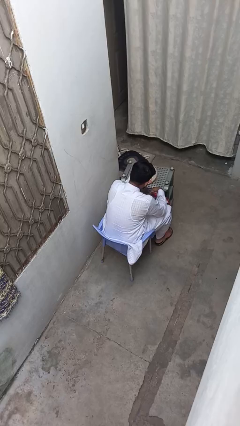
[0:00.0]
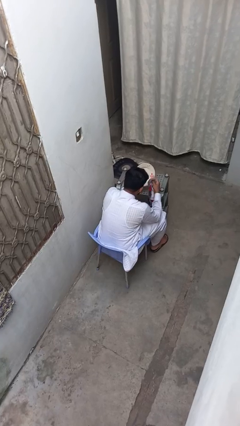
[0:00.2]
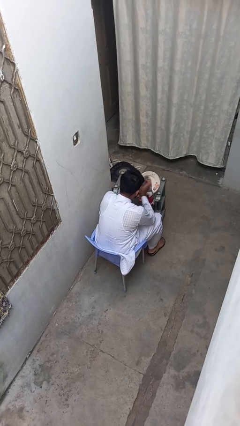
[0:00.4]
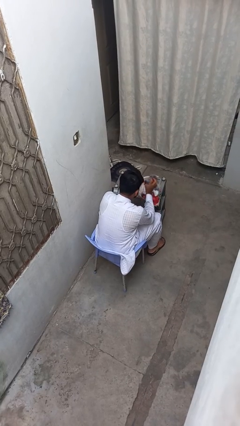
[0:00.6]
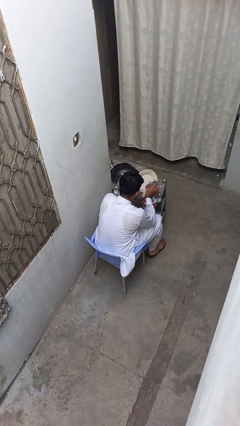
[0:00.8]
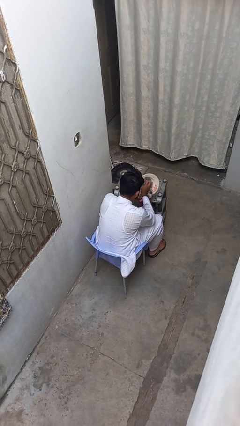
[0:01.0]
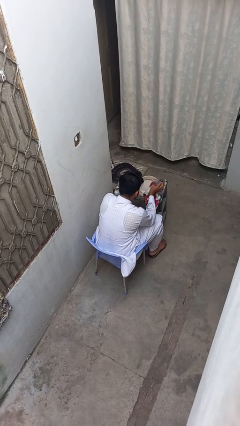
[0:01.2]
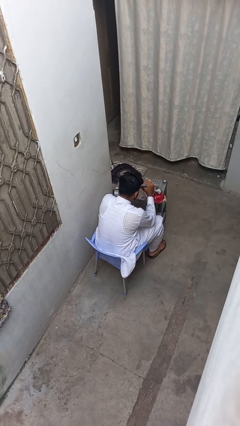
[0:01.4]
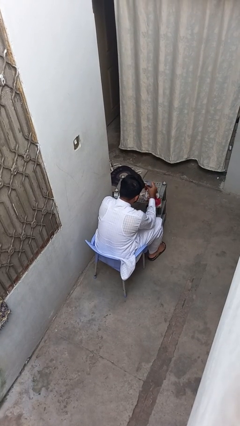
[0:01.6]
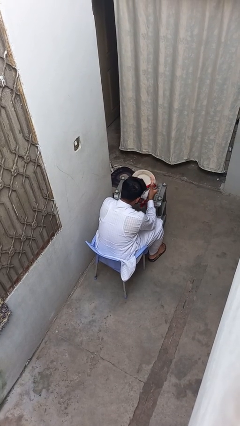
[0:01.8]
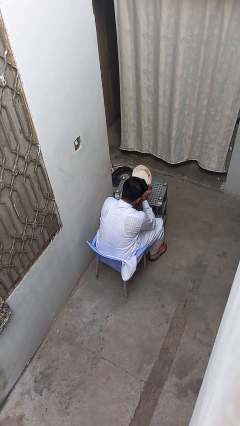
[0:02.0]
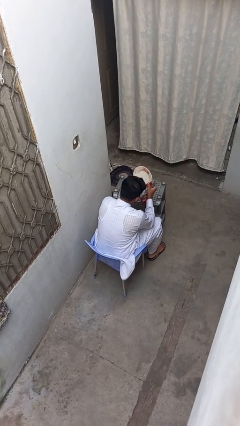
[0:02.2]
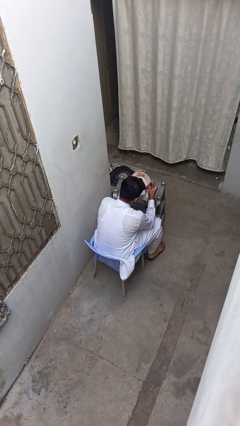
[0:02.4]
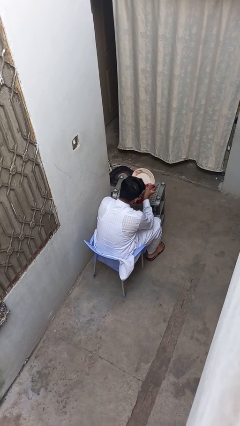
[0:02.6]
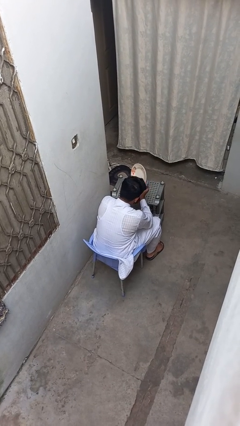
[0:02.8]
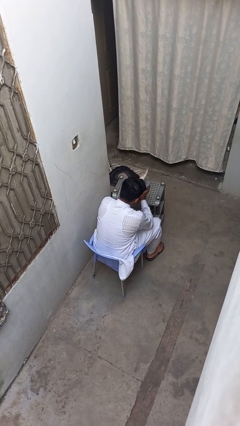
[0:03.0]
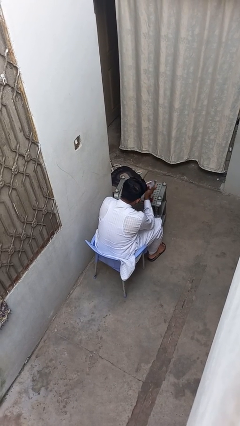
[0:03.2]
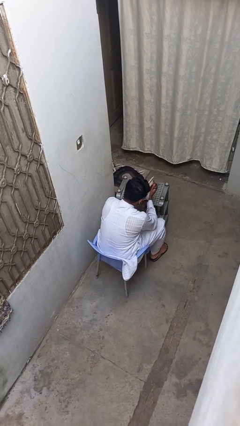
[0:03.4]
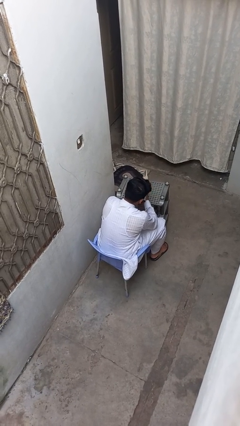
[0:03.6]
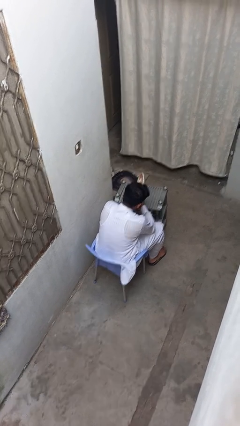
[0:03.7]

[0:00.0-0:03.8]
person dries dish

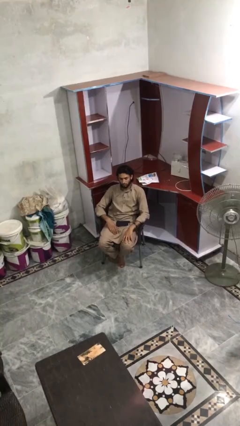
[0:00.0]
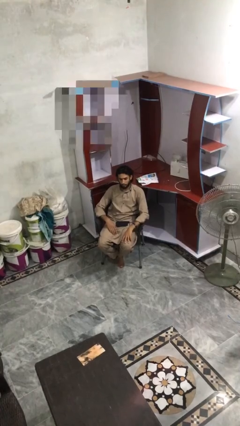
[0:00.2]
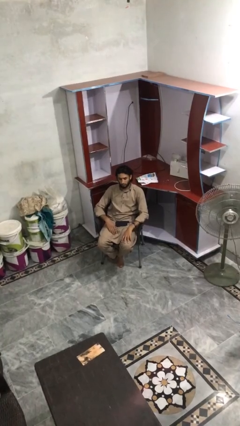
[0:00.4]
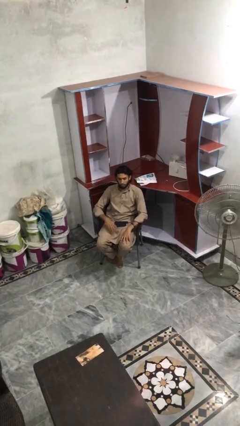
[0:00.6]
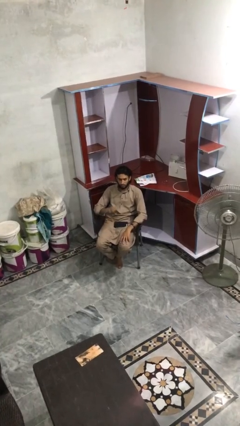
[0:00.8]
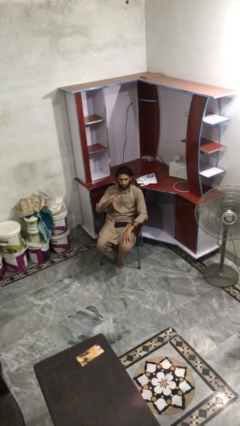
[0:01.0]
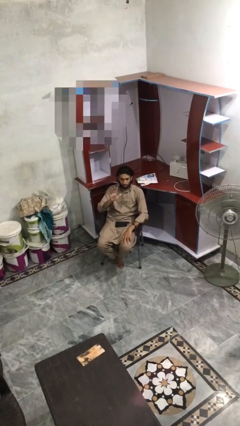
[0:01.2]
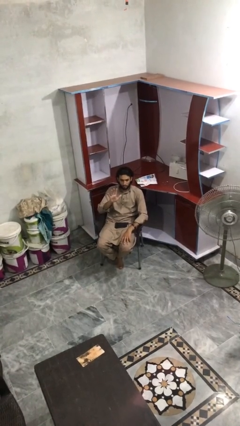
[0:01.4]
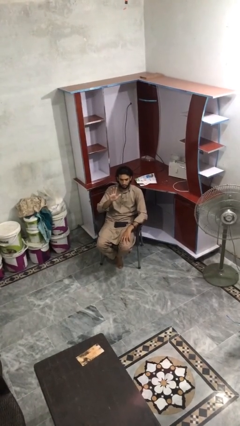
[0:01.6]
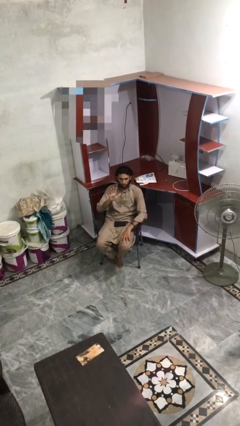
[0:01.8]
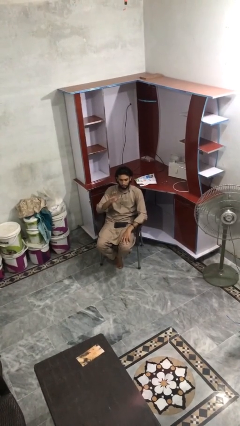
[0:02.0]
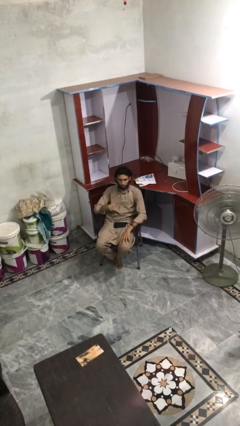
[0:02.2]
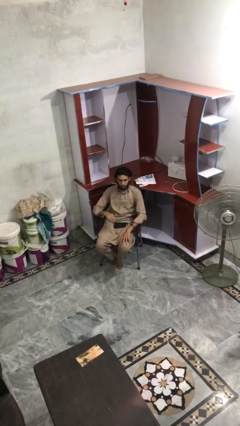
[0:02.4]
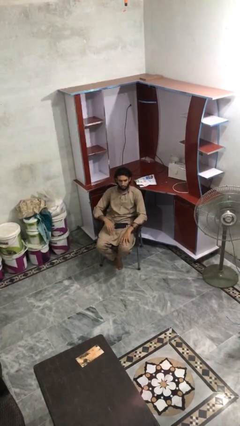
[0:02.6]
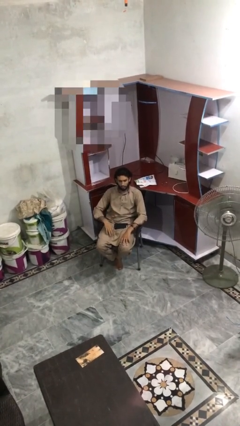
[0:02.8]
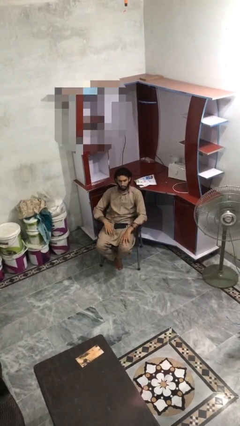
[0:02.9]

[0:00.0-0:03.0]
person gestures number five

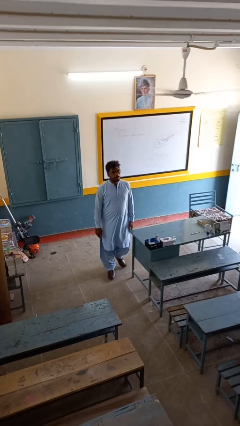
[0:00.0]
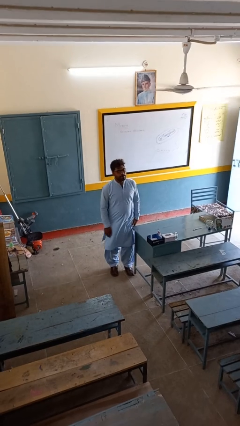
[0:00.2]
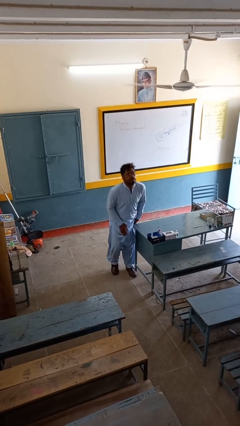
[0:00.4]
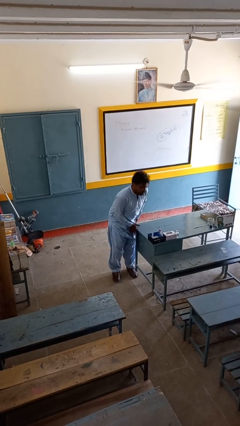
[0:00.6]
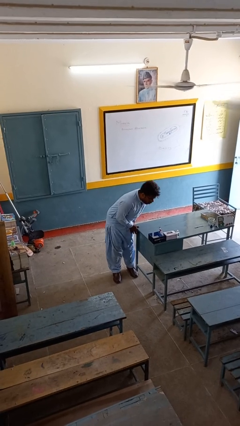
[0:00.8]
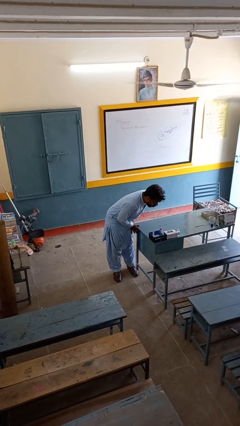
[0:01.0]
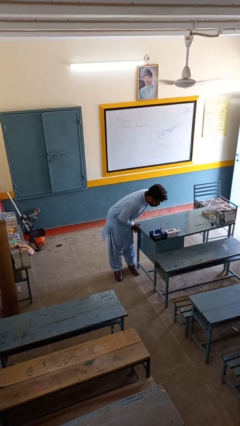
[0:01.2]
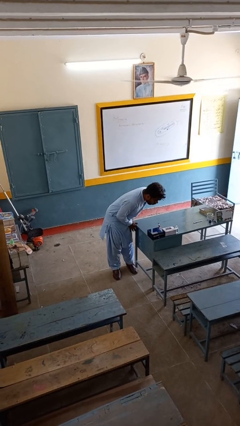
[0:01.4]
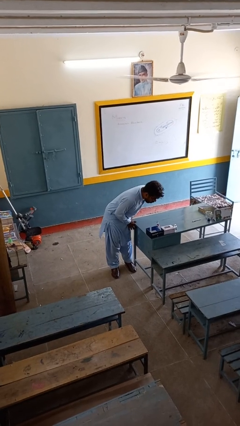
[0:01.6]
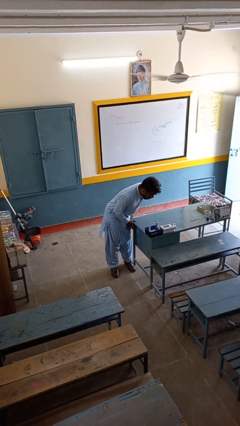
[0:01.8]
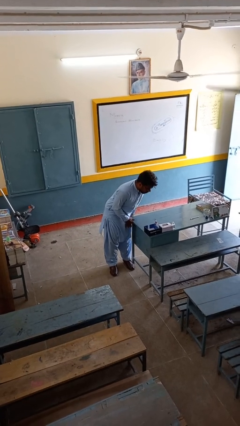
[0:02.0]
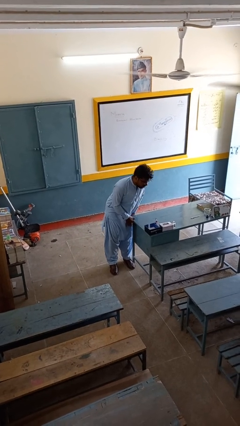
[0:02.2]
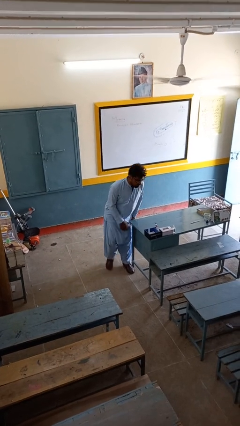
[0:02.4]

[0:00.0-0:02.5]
person bumps into table

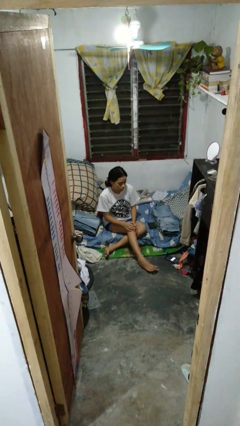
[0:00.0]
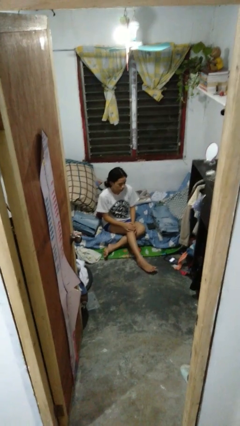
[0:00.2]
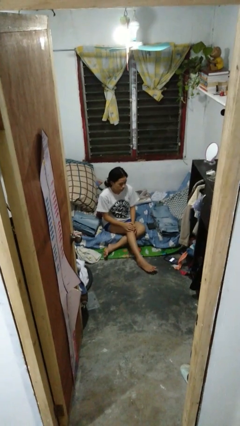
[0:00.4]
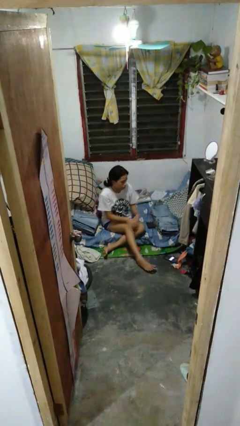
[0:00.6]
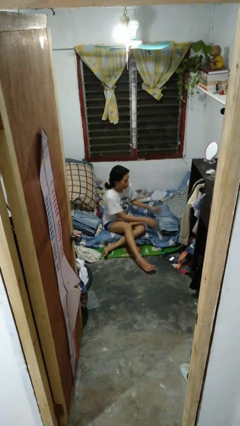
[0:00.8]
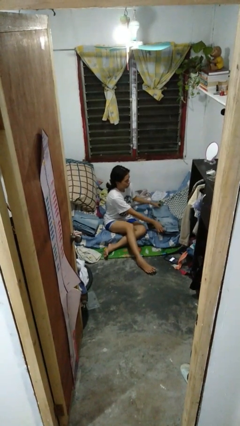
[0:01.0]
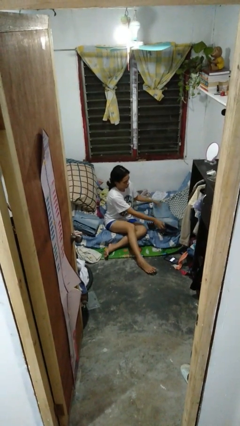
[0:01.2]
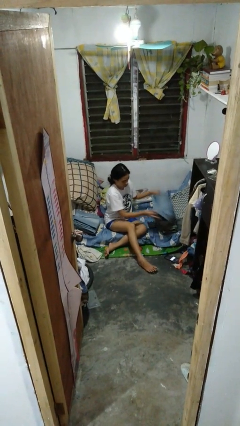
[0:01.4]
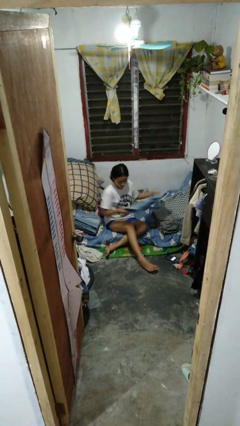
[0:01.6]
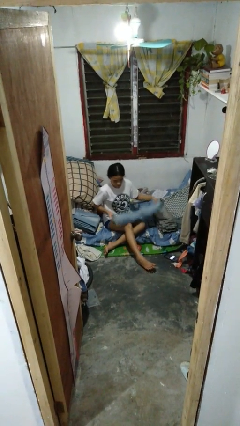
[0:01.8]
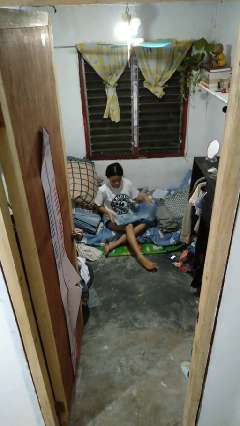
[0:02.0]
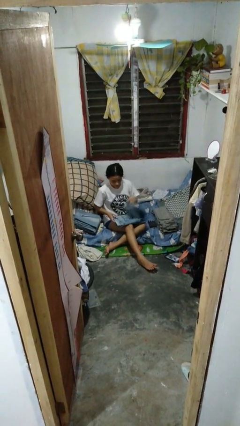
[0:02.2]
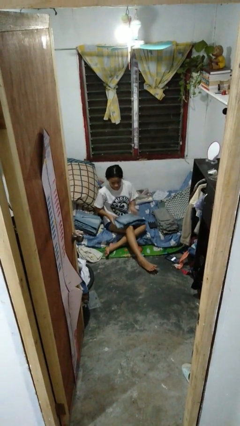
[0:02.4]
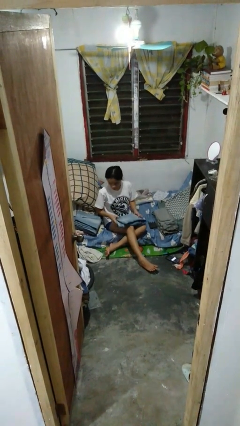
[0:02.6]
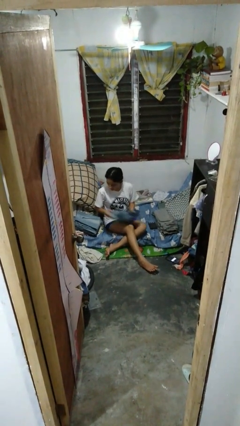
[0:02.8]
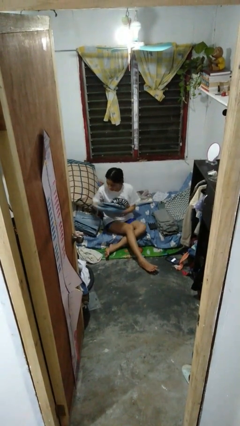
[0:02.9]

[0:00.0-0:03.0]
person folds pants

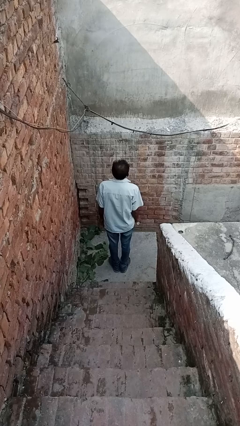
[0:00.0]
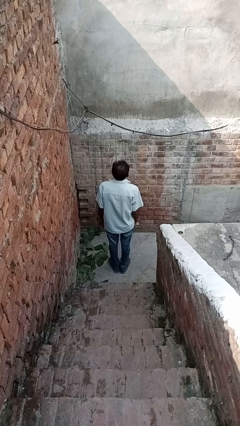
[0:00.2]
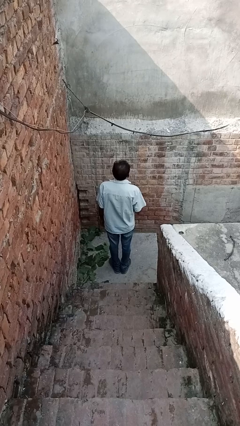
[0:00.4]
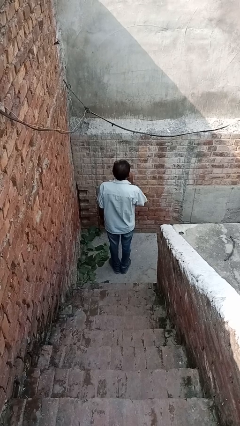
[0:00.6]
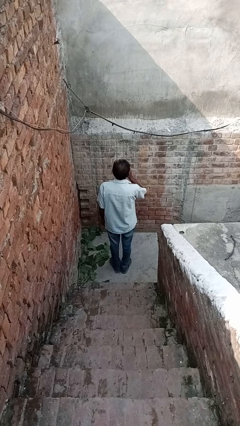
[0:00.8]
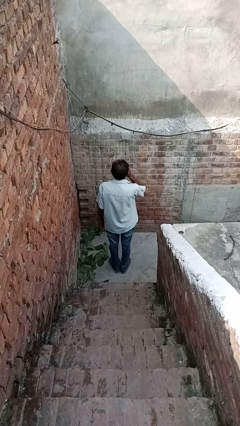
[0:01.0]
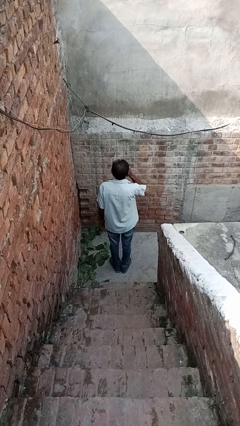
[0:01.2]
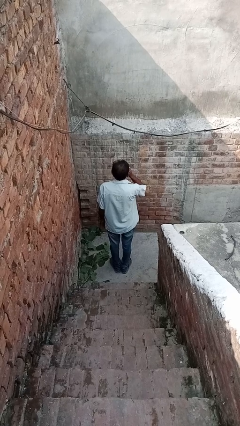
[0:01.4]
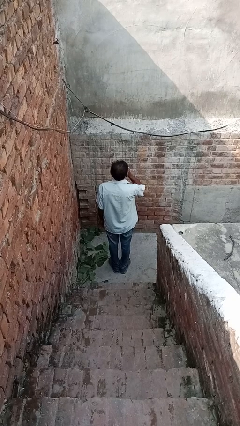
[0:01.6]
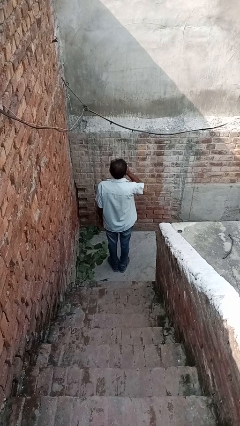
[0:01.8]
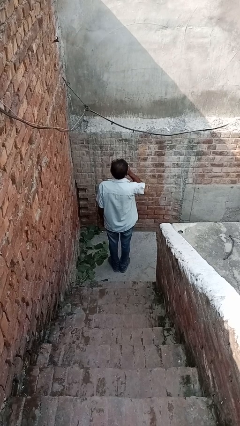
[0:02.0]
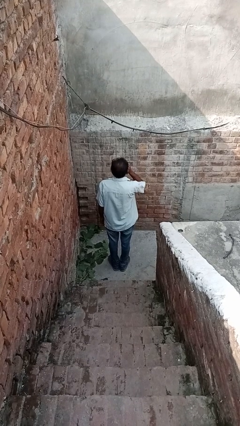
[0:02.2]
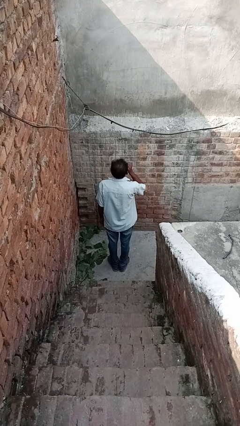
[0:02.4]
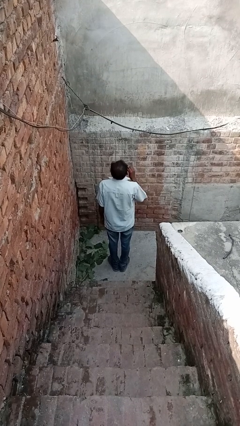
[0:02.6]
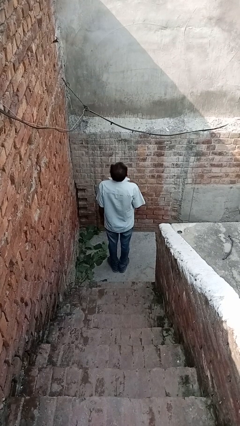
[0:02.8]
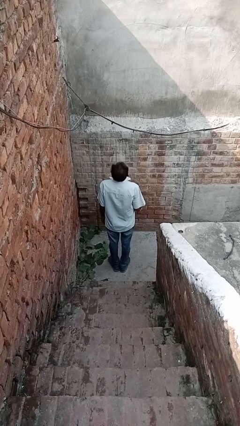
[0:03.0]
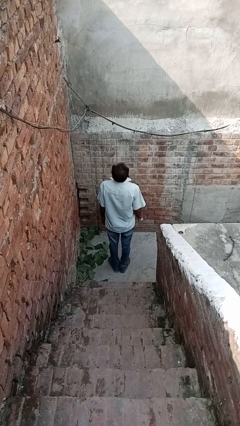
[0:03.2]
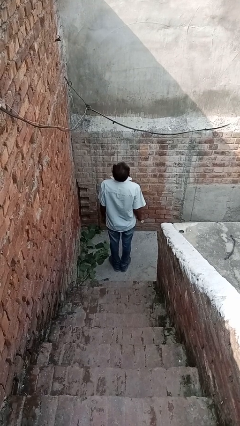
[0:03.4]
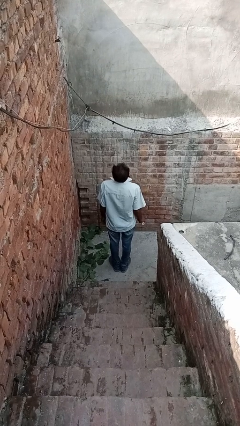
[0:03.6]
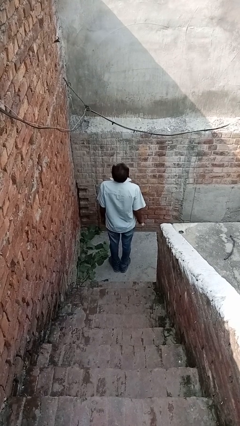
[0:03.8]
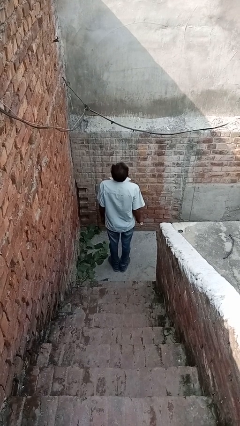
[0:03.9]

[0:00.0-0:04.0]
person vapes

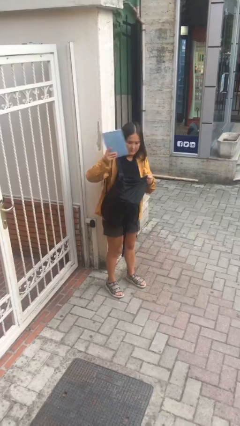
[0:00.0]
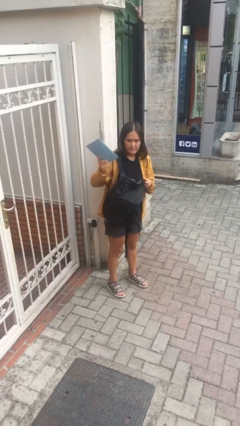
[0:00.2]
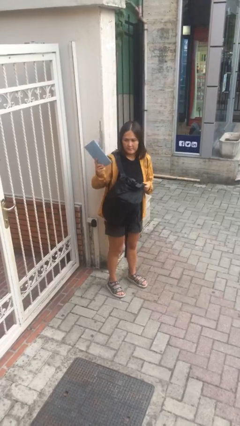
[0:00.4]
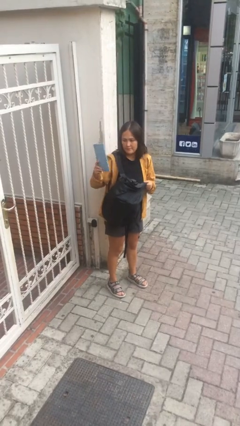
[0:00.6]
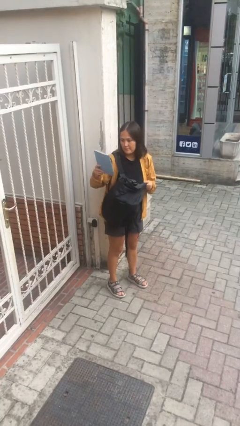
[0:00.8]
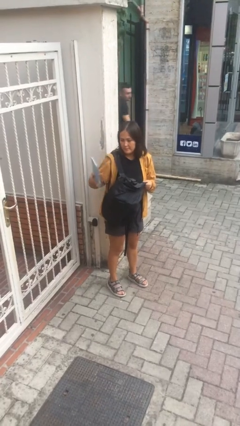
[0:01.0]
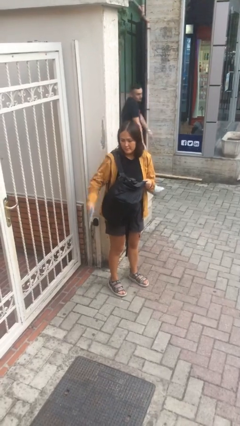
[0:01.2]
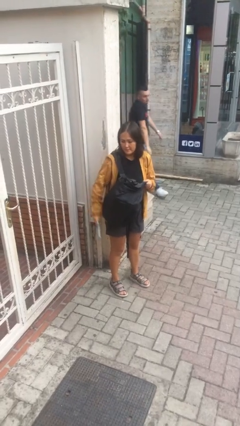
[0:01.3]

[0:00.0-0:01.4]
person takes object from backpack
